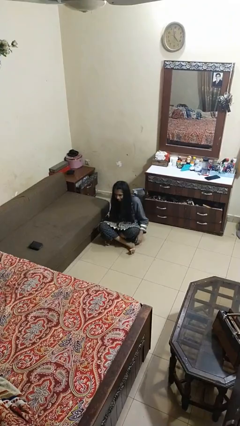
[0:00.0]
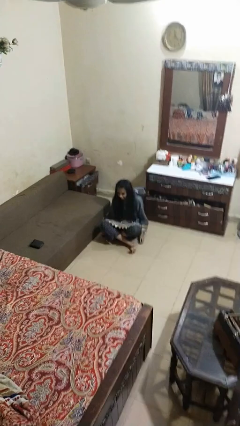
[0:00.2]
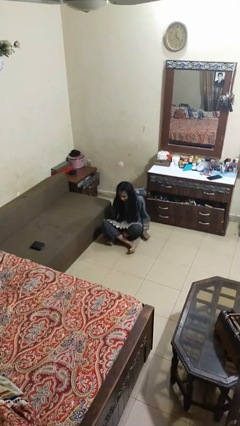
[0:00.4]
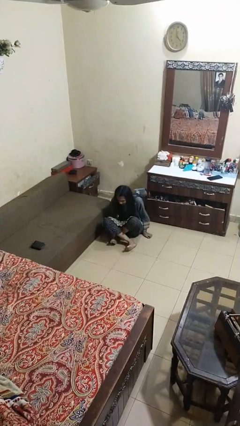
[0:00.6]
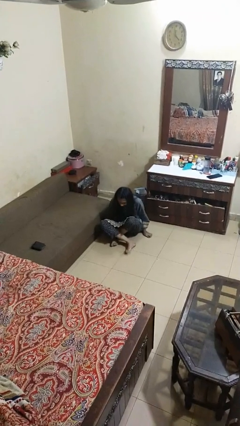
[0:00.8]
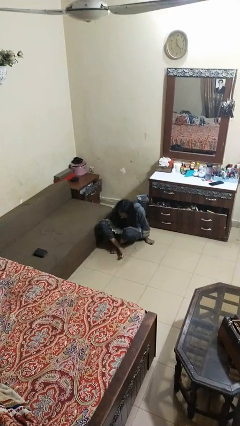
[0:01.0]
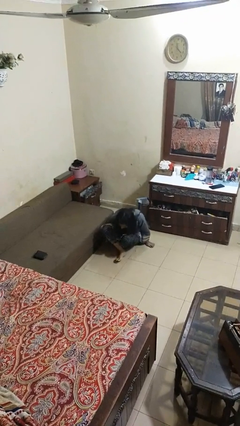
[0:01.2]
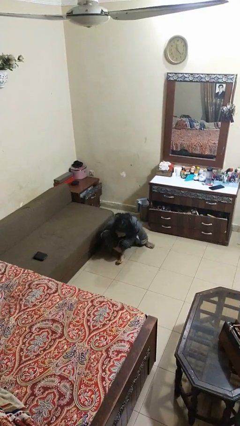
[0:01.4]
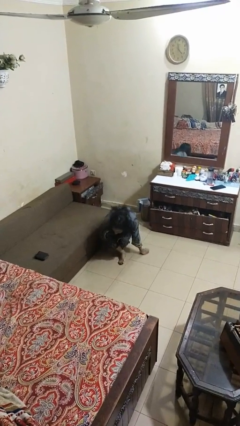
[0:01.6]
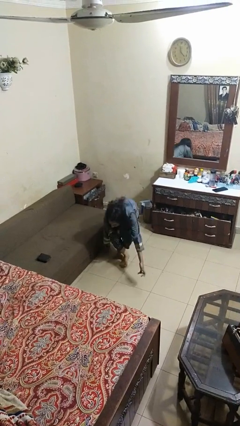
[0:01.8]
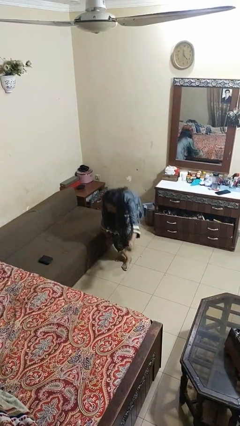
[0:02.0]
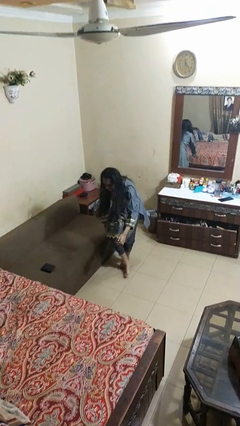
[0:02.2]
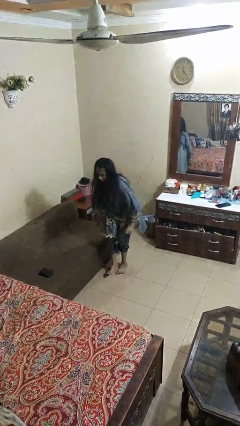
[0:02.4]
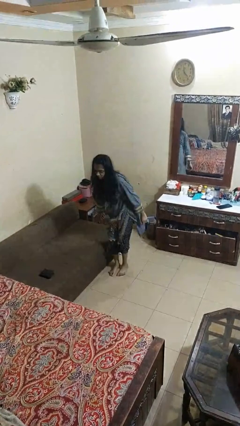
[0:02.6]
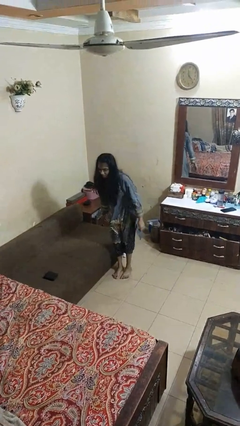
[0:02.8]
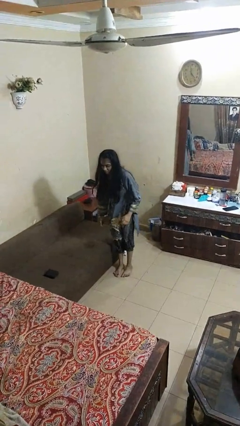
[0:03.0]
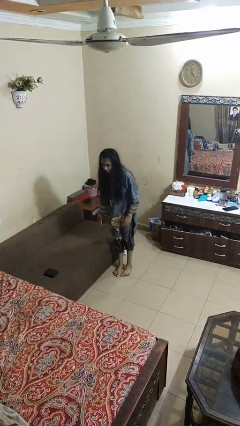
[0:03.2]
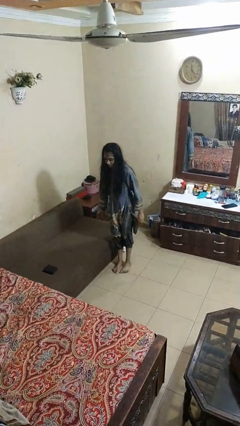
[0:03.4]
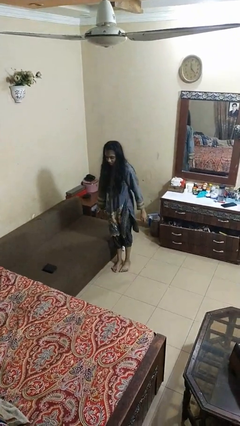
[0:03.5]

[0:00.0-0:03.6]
person stands up from floor

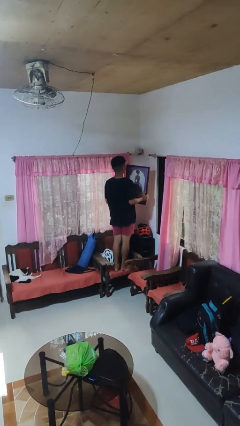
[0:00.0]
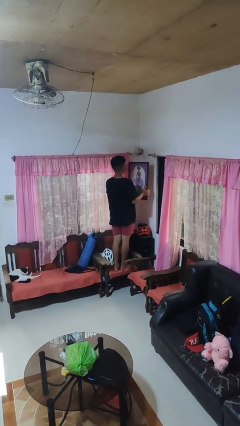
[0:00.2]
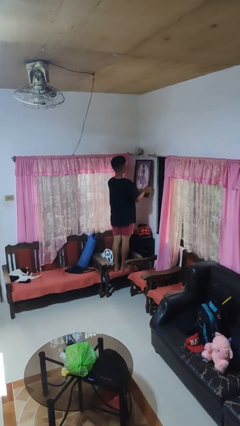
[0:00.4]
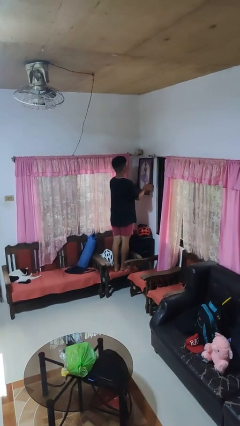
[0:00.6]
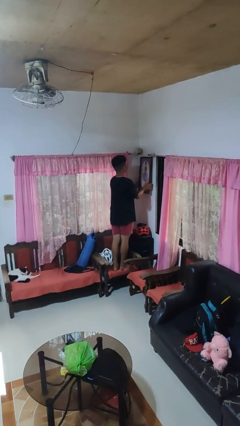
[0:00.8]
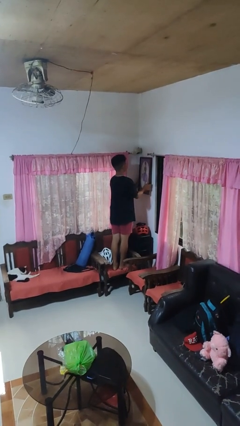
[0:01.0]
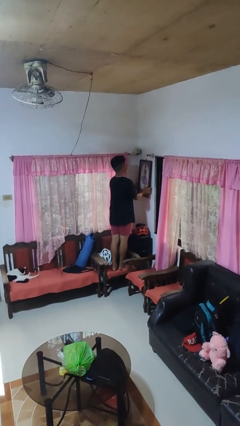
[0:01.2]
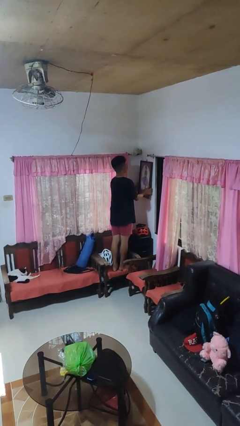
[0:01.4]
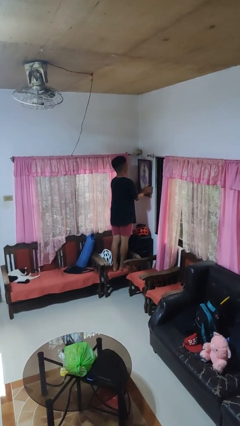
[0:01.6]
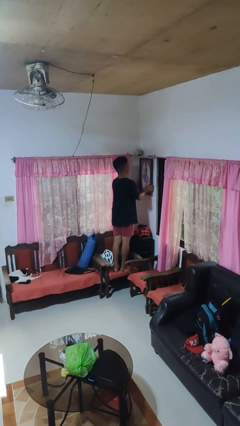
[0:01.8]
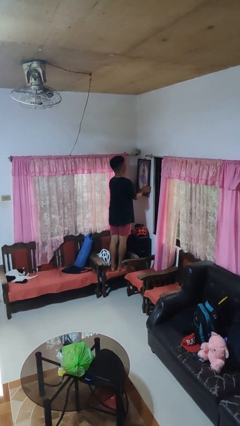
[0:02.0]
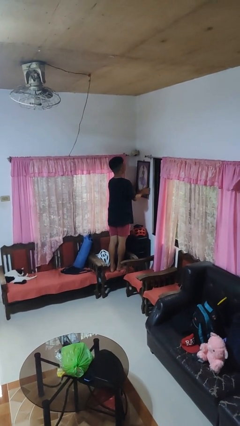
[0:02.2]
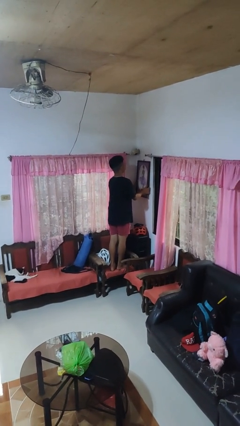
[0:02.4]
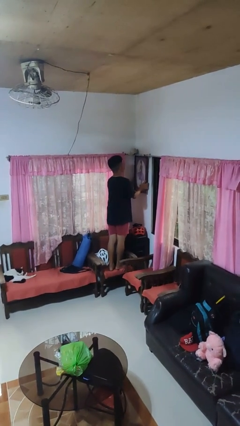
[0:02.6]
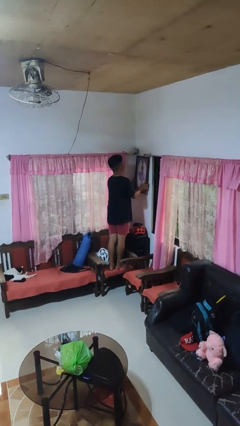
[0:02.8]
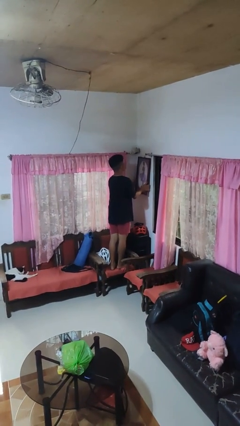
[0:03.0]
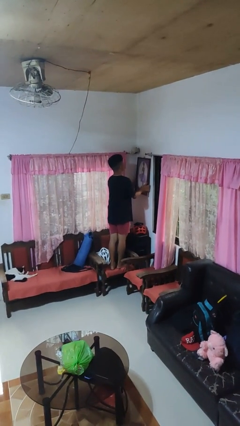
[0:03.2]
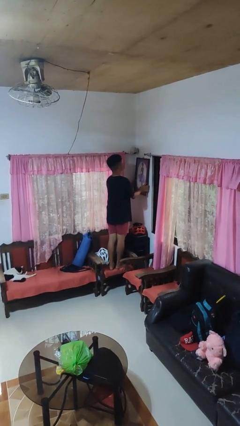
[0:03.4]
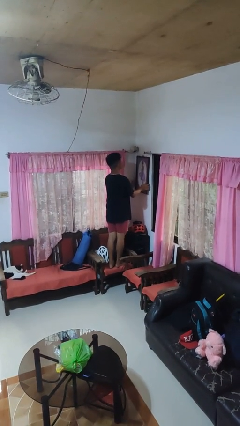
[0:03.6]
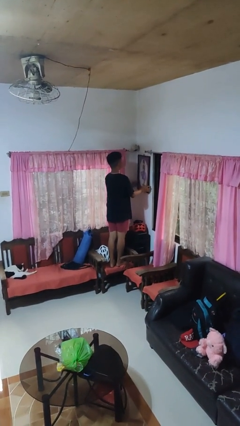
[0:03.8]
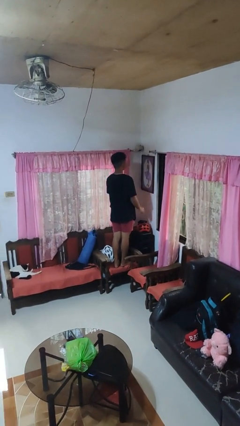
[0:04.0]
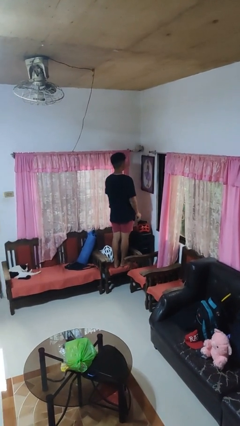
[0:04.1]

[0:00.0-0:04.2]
person puts up picture frame

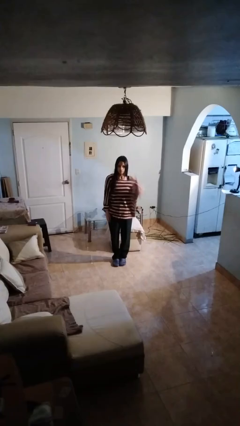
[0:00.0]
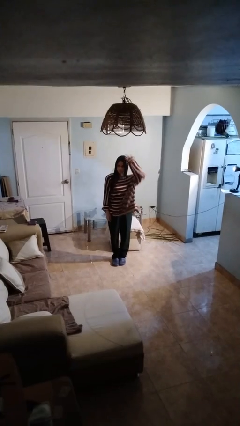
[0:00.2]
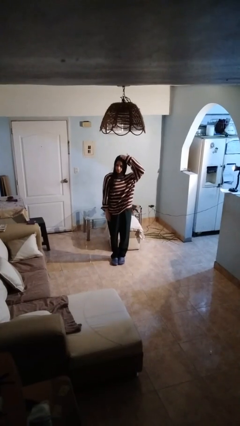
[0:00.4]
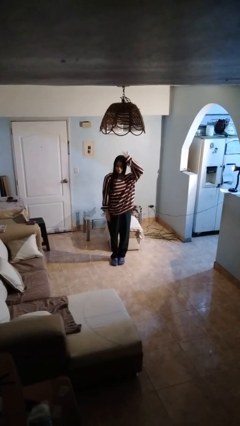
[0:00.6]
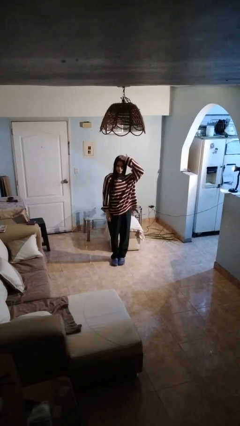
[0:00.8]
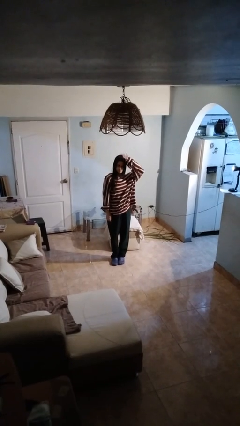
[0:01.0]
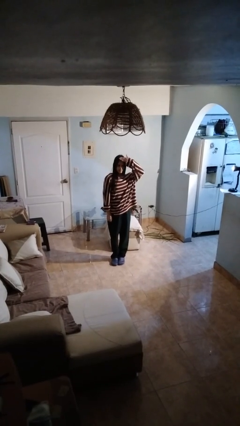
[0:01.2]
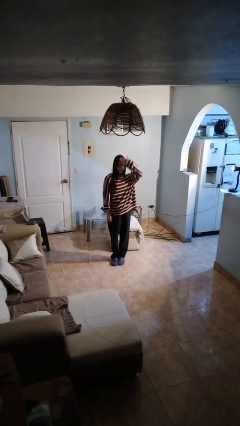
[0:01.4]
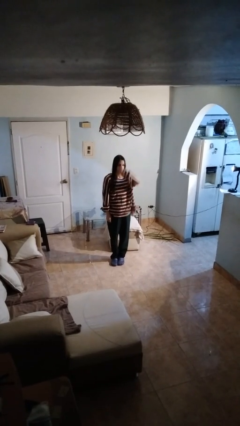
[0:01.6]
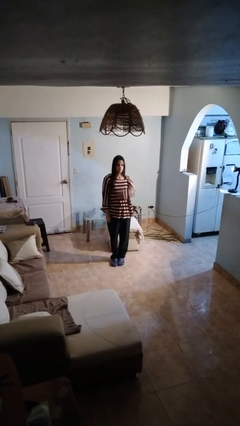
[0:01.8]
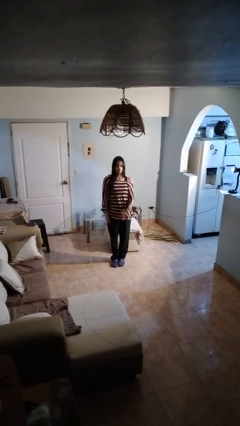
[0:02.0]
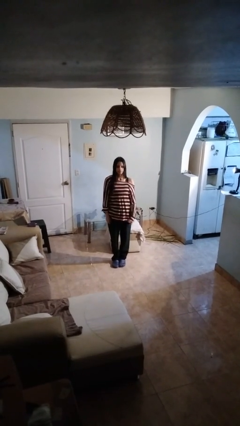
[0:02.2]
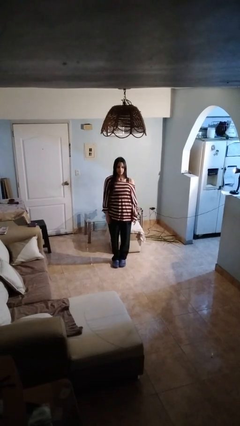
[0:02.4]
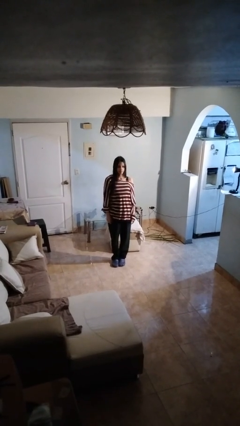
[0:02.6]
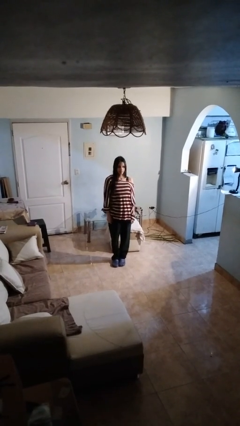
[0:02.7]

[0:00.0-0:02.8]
person pats head

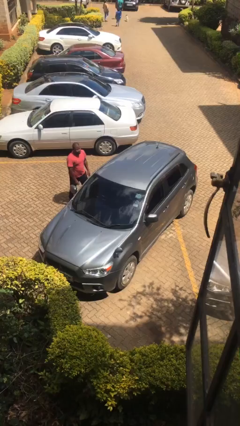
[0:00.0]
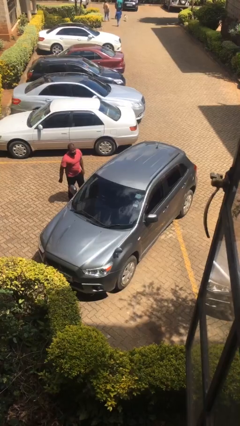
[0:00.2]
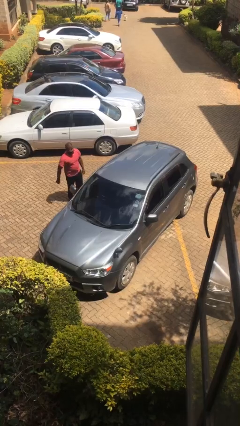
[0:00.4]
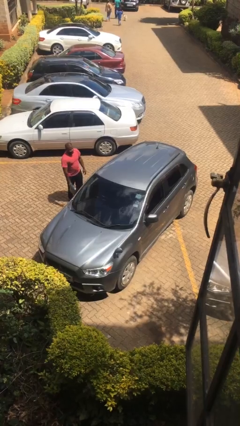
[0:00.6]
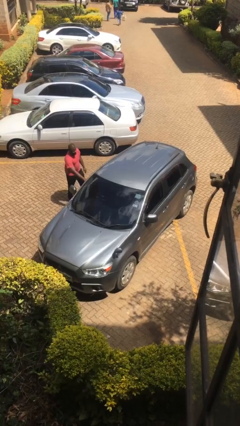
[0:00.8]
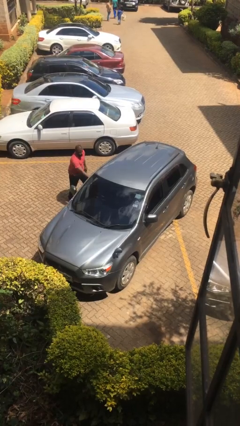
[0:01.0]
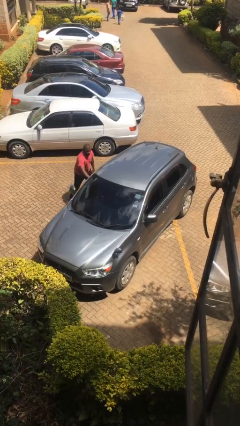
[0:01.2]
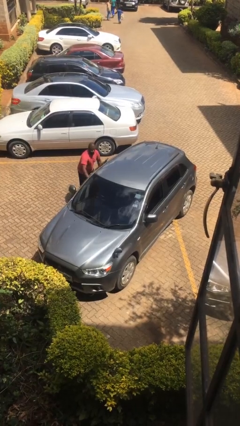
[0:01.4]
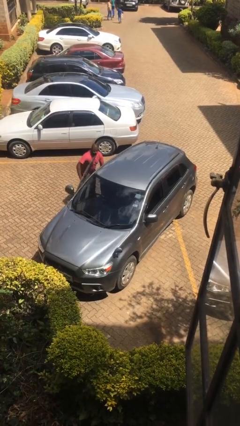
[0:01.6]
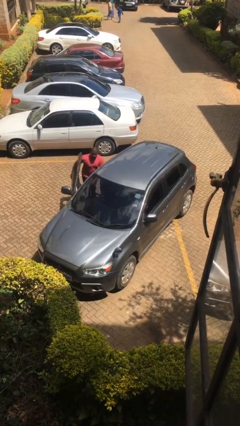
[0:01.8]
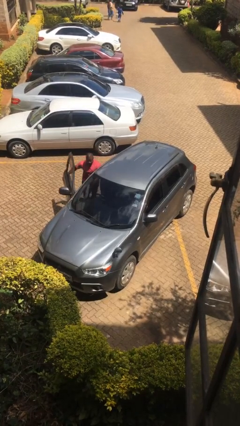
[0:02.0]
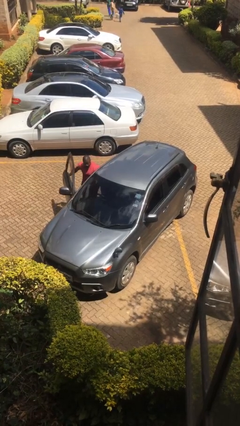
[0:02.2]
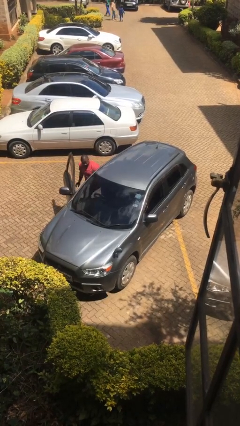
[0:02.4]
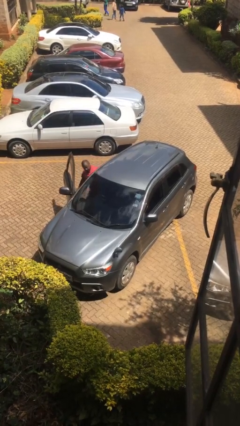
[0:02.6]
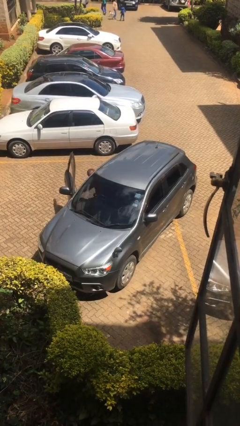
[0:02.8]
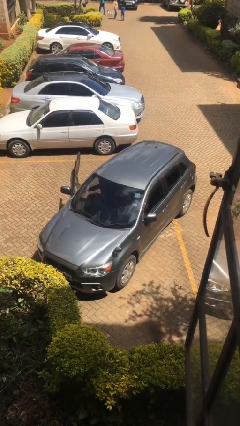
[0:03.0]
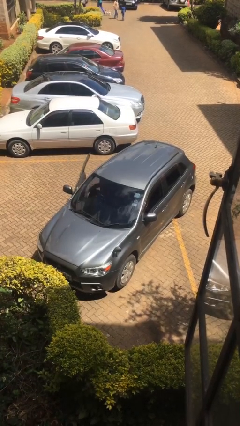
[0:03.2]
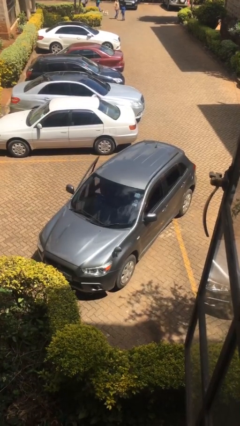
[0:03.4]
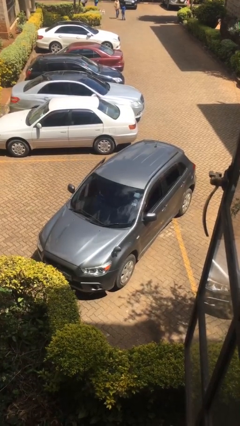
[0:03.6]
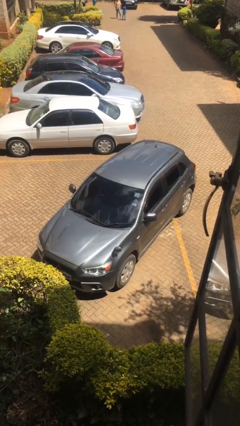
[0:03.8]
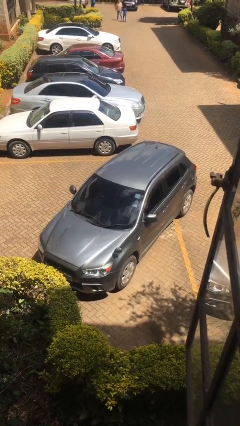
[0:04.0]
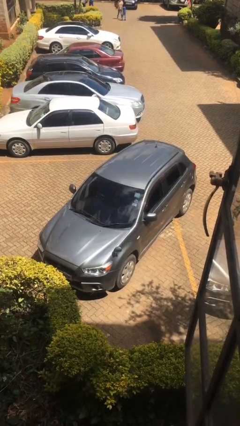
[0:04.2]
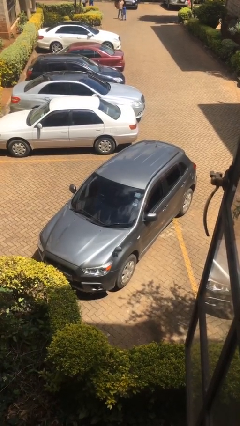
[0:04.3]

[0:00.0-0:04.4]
car picks up person

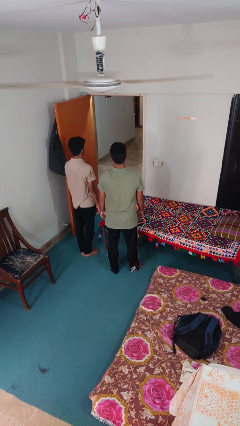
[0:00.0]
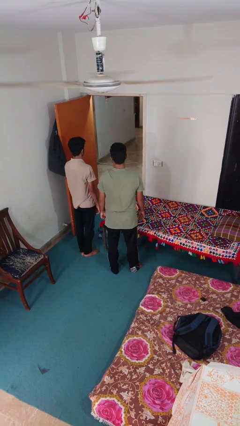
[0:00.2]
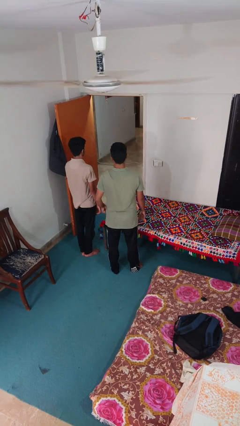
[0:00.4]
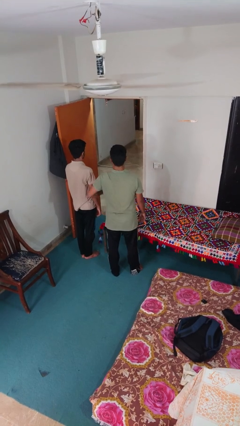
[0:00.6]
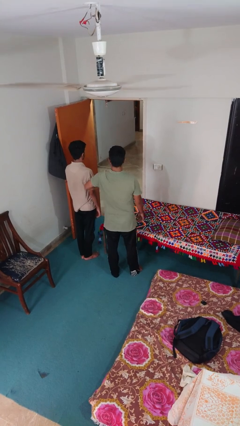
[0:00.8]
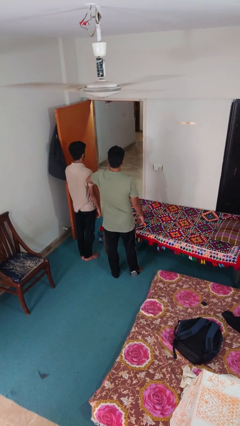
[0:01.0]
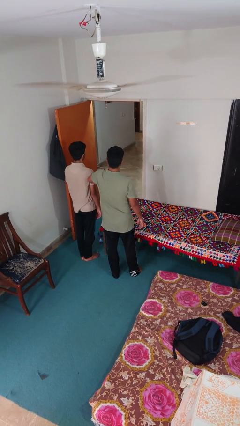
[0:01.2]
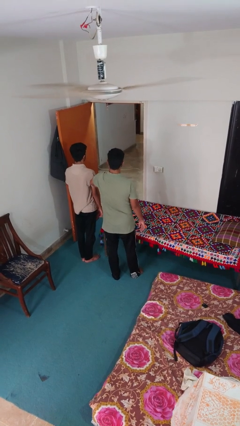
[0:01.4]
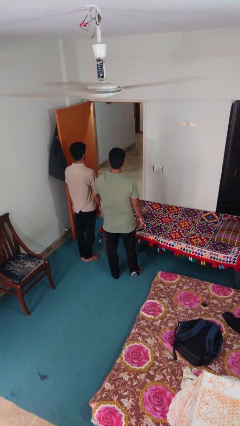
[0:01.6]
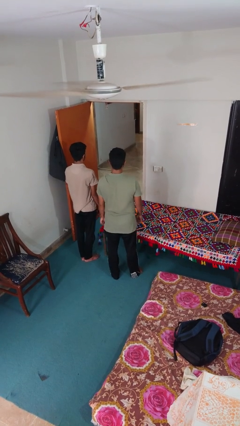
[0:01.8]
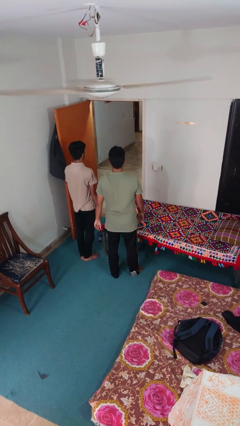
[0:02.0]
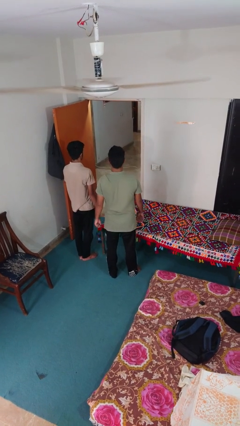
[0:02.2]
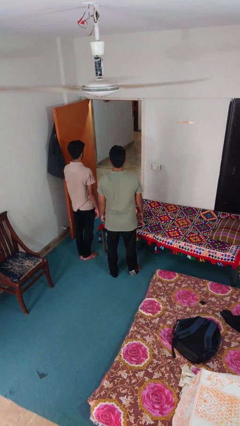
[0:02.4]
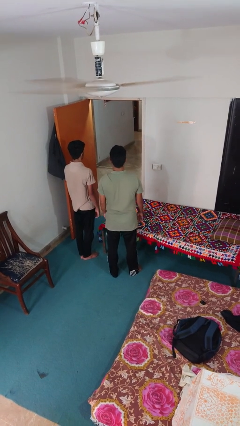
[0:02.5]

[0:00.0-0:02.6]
person nudges person with elbow
